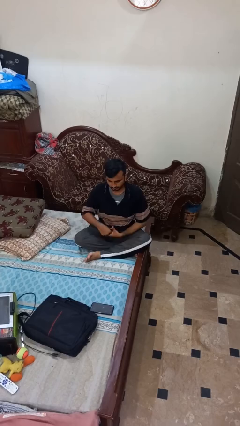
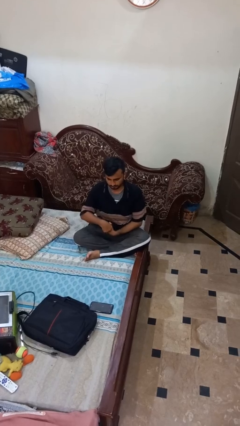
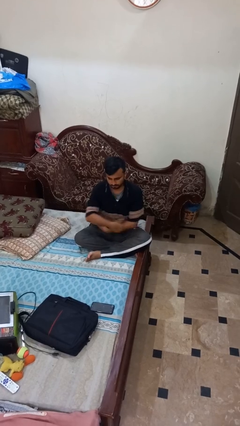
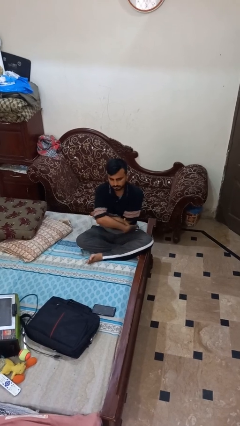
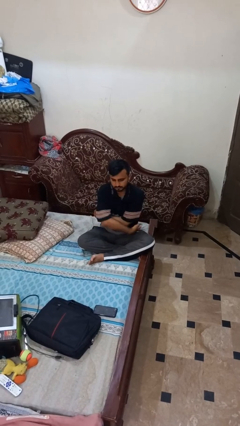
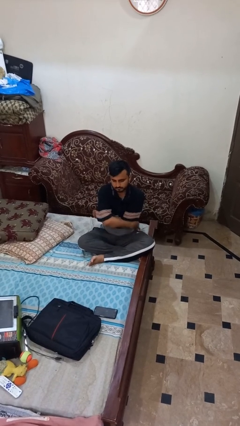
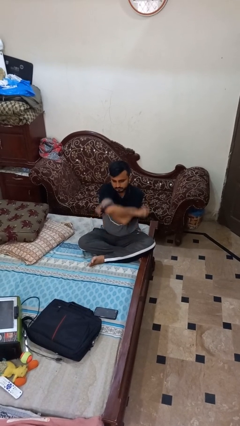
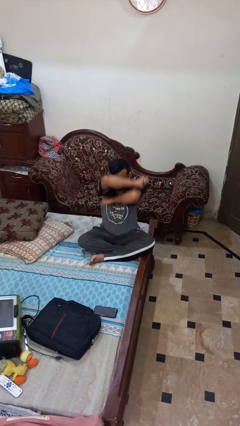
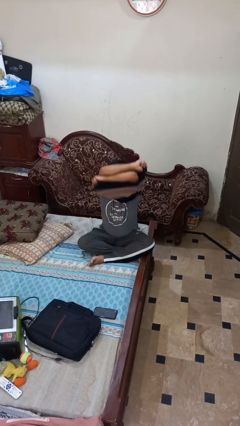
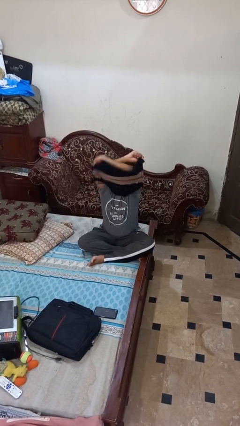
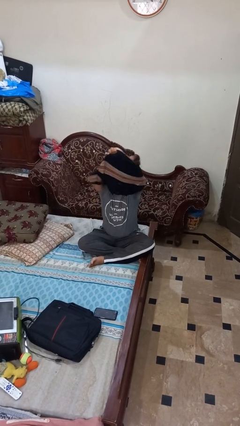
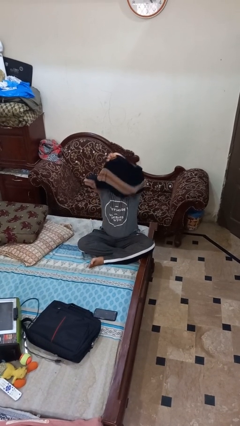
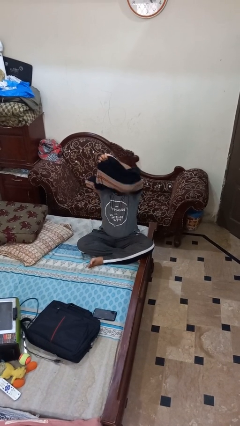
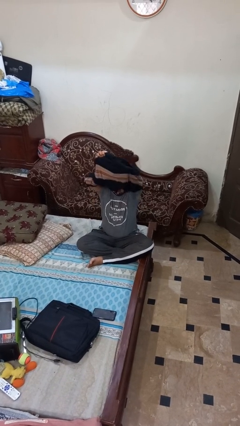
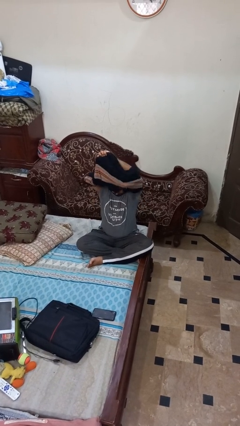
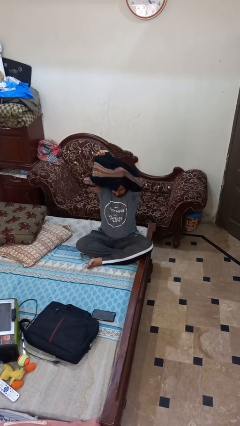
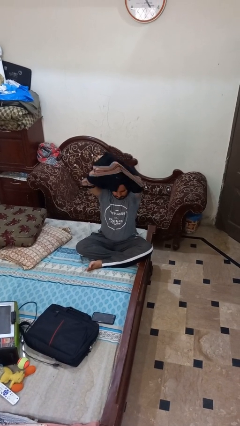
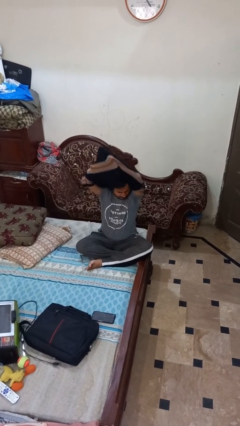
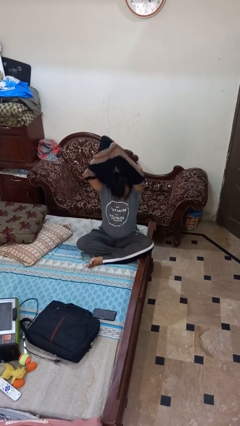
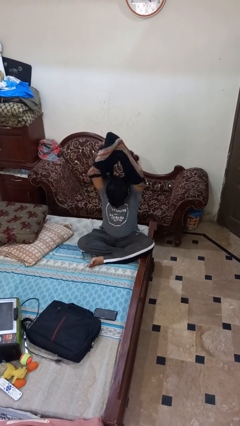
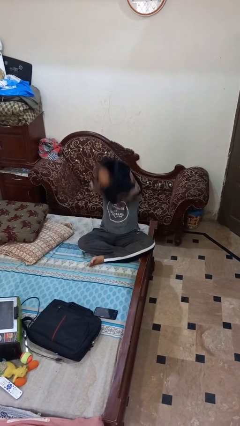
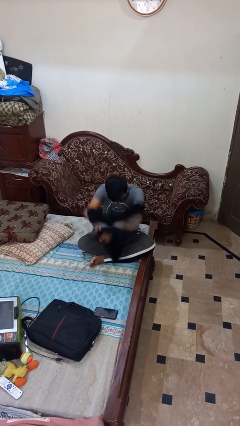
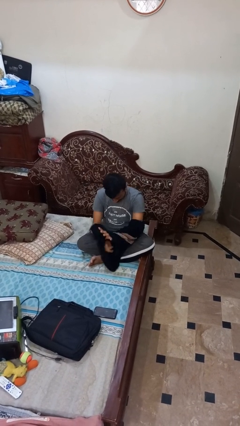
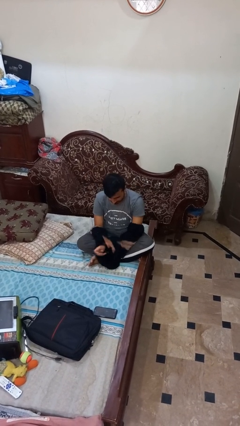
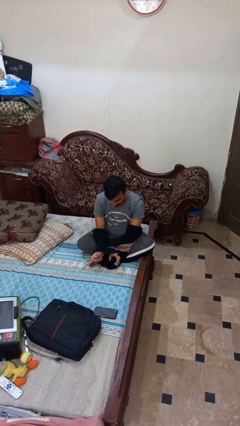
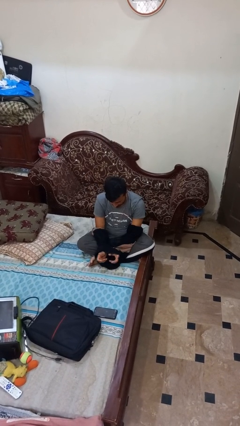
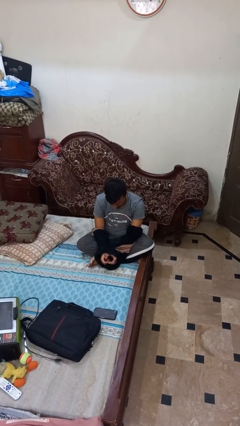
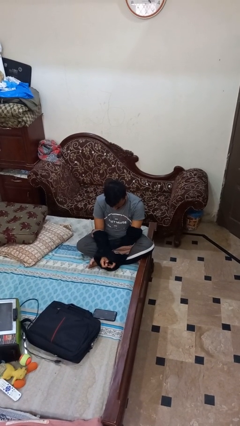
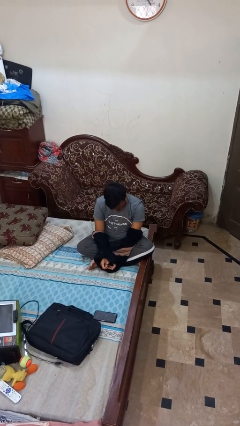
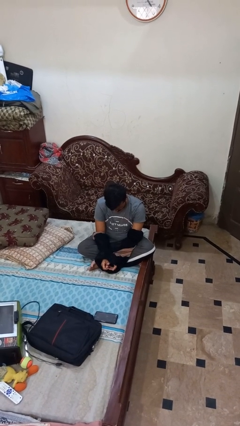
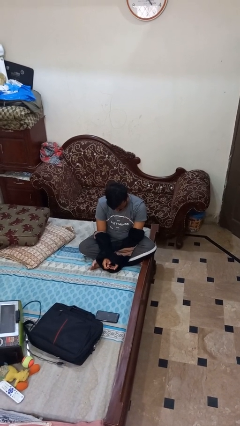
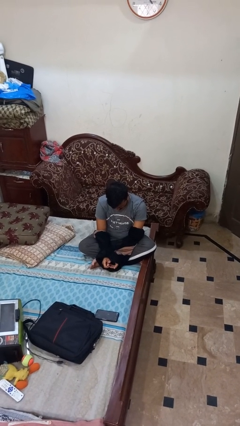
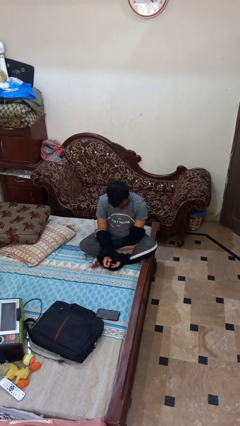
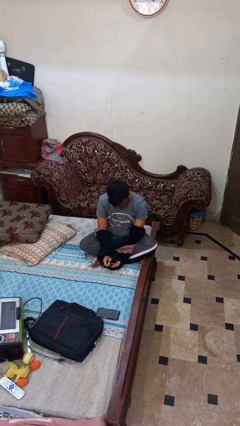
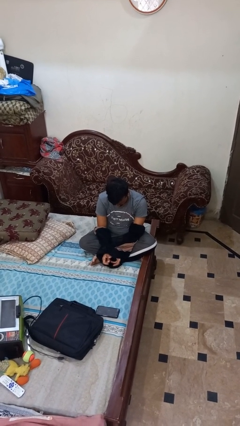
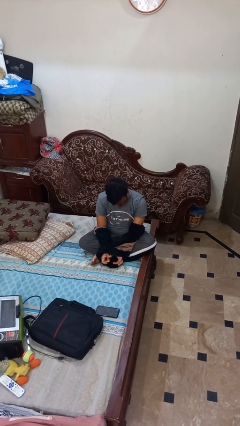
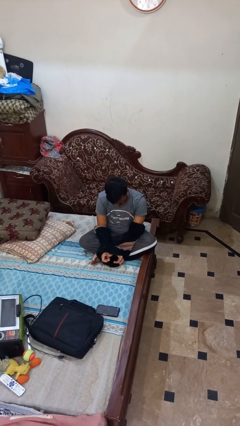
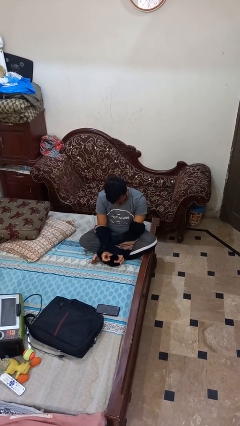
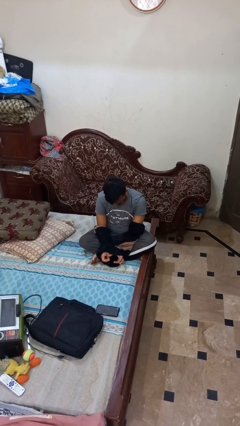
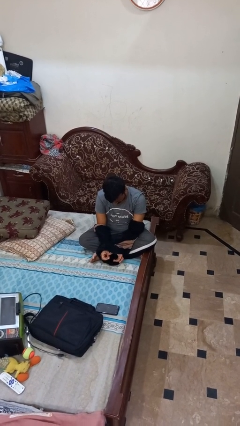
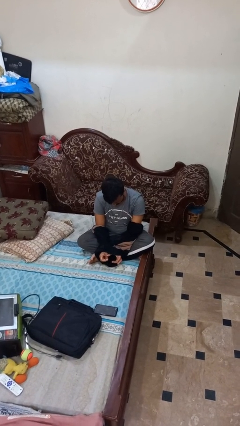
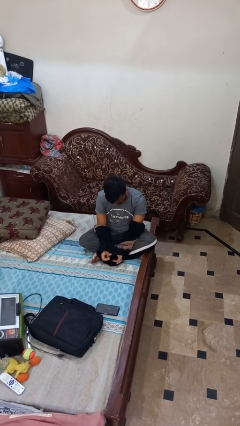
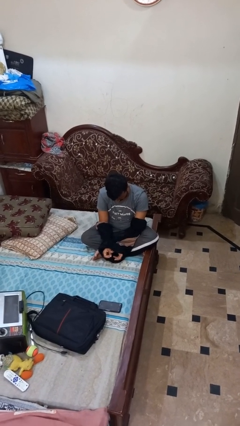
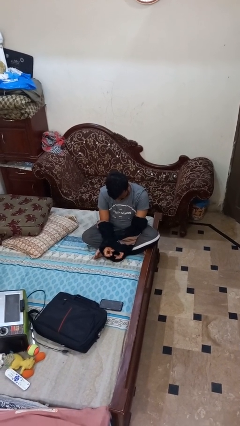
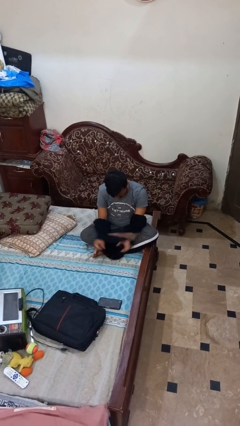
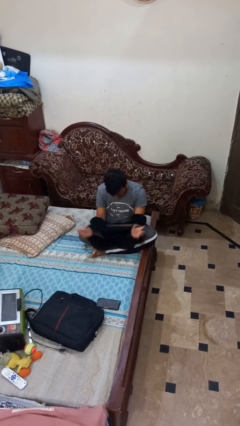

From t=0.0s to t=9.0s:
person takes off shirt

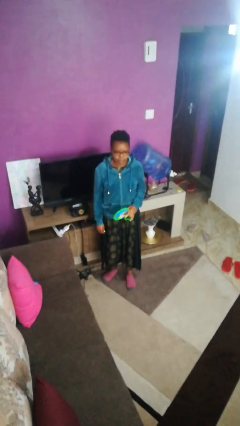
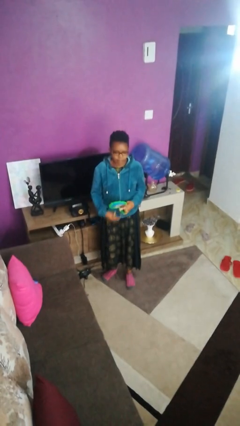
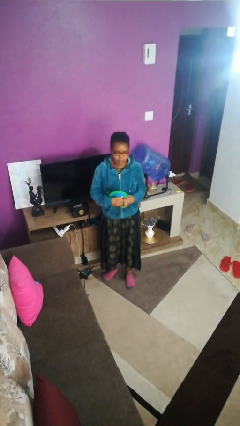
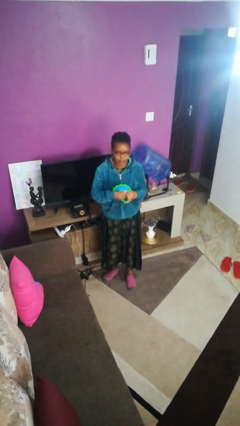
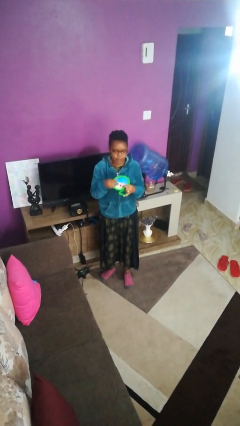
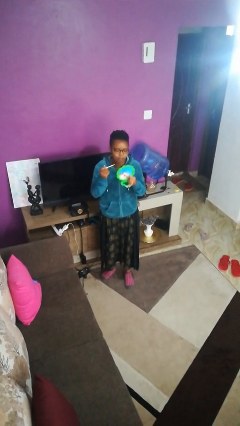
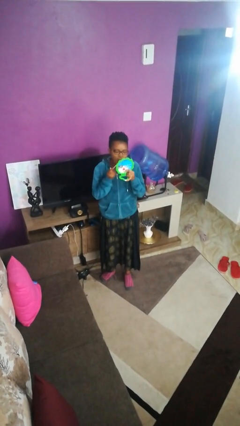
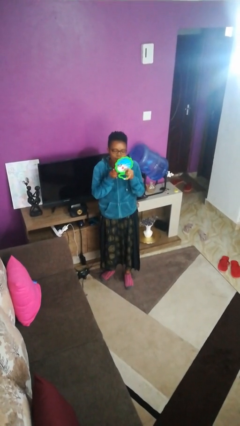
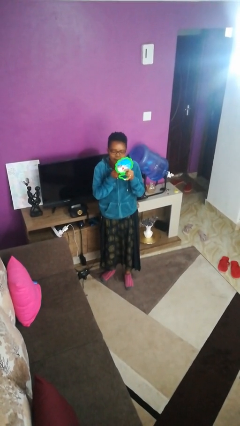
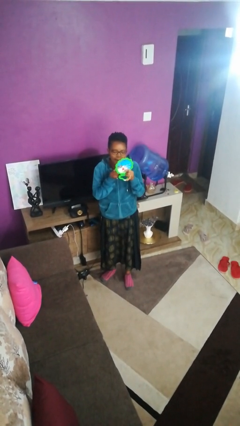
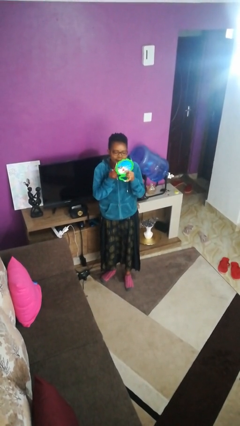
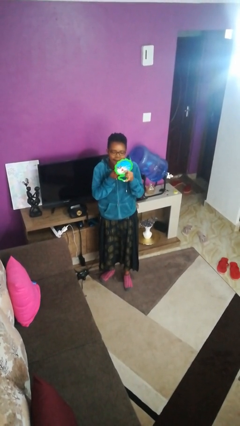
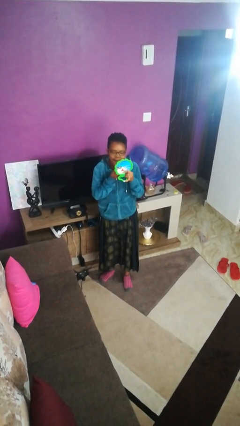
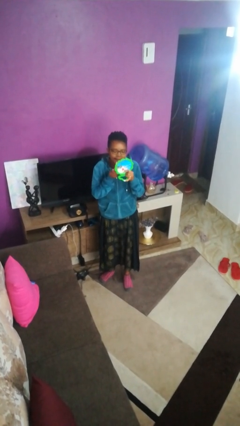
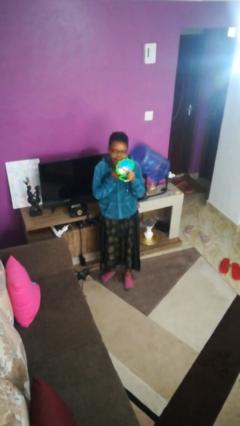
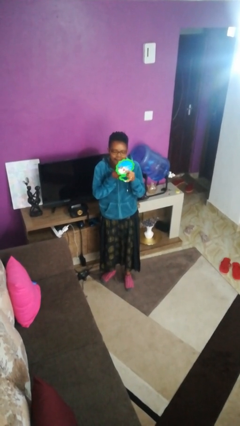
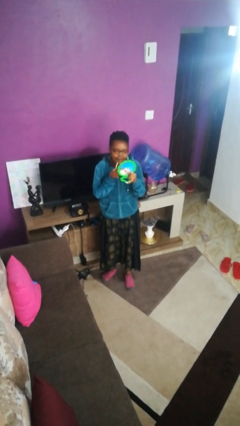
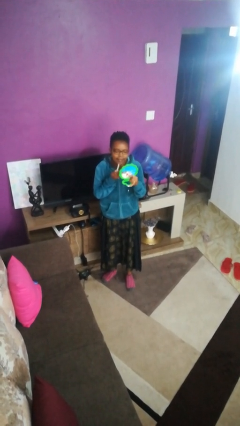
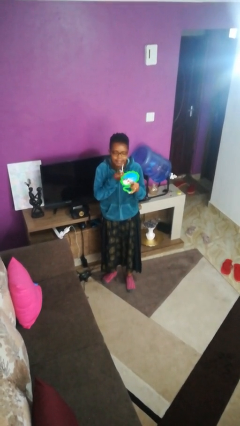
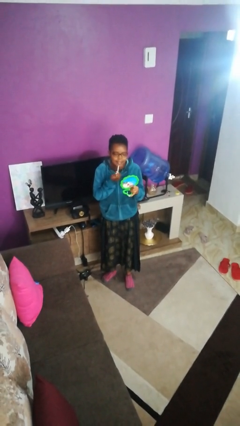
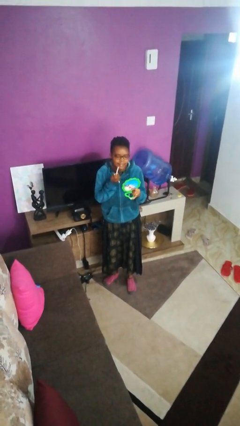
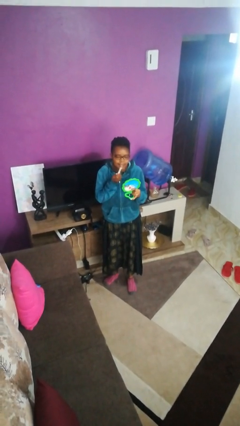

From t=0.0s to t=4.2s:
person applies lip makeup

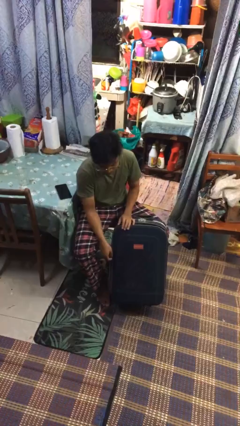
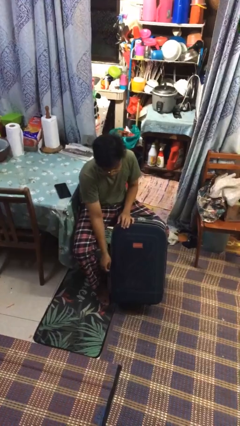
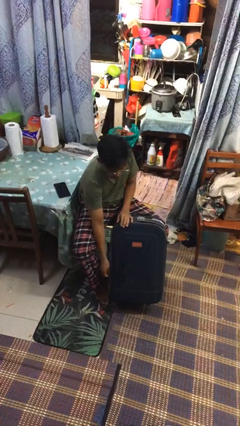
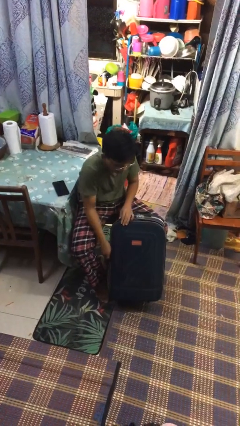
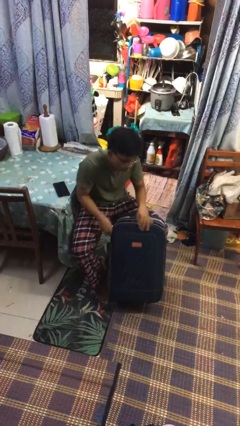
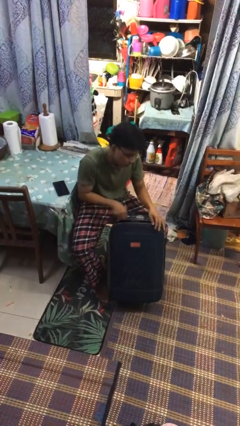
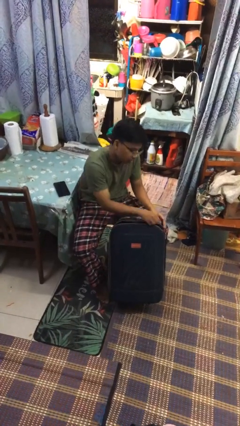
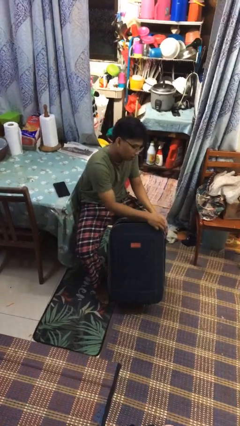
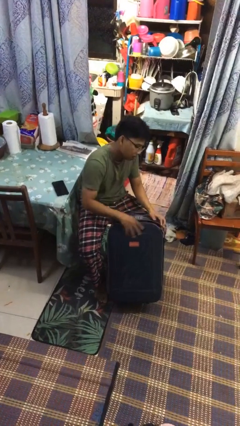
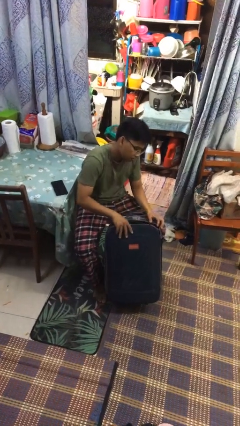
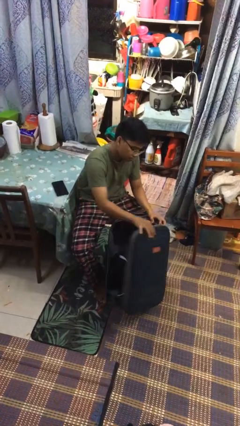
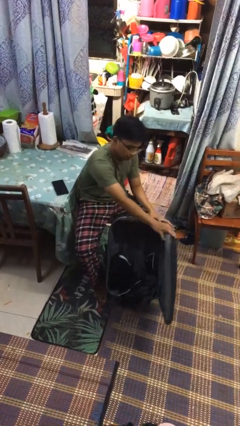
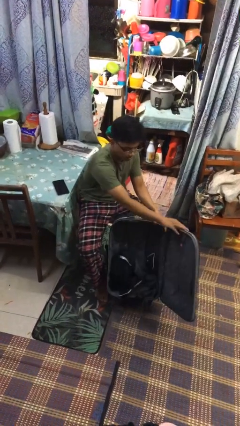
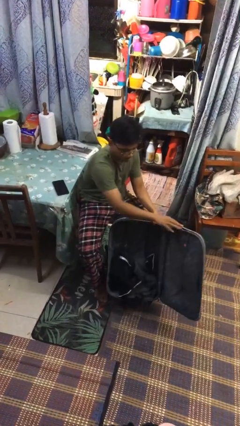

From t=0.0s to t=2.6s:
person opens suitcase

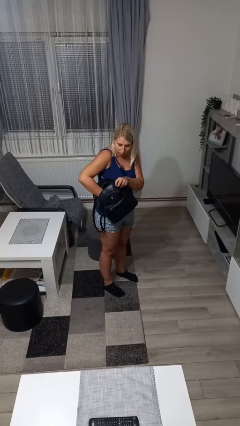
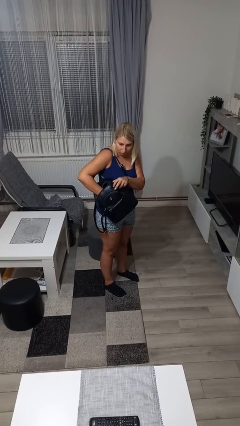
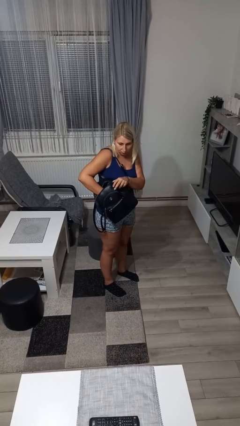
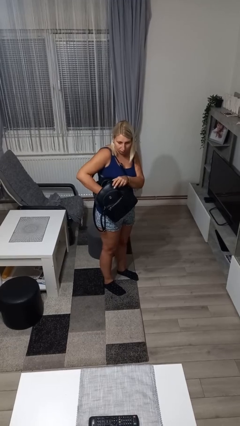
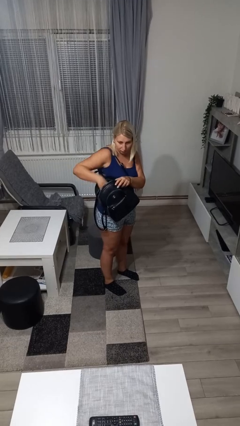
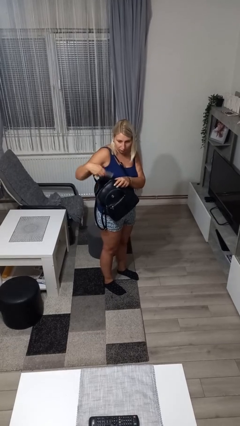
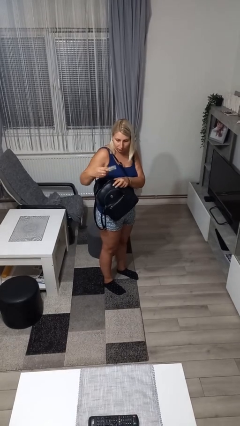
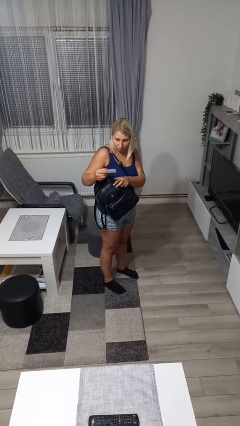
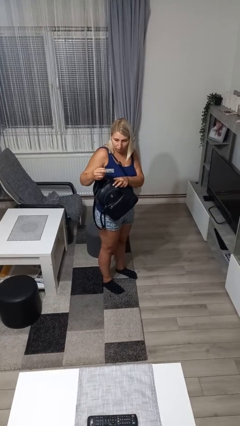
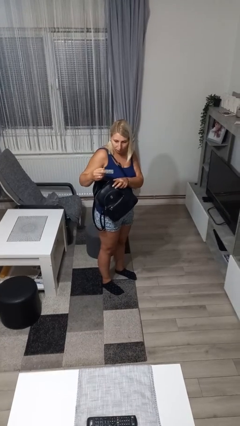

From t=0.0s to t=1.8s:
person takes object from backpack
